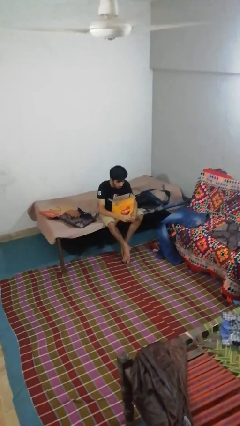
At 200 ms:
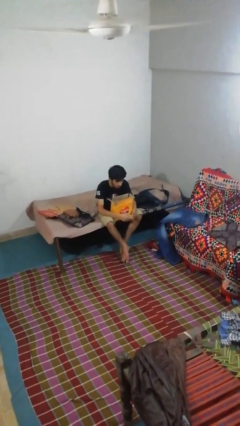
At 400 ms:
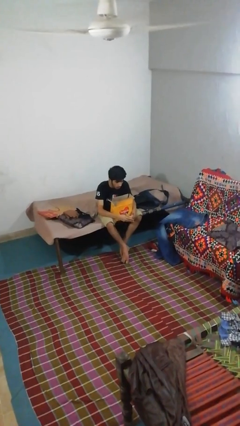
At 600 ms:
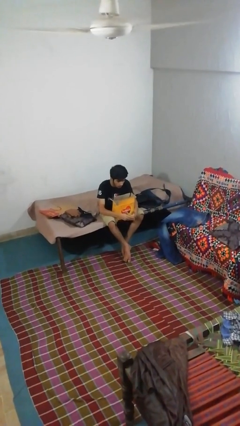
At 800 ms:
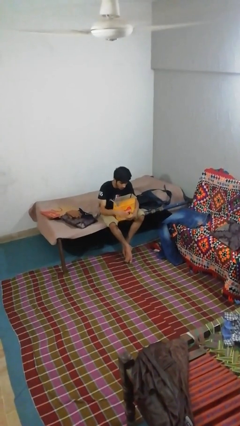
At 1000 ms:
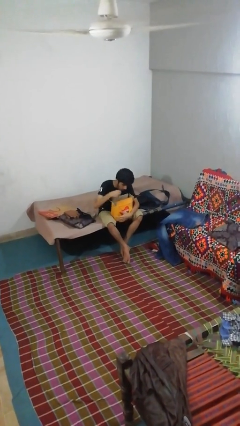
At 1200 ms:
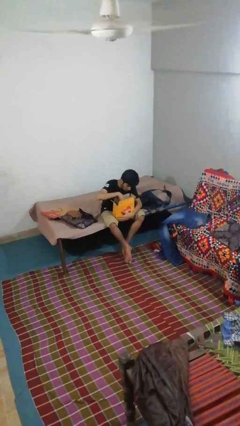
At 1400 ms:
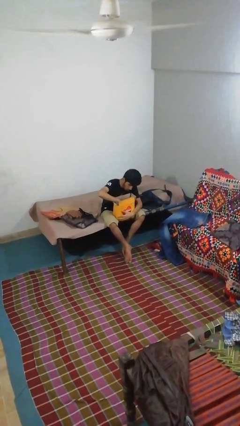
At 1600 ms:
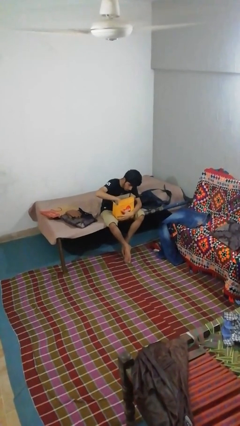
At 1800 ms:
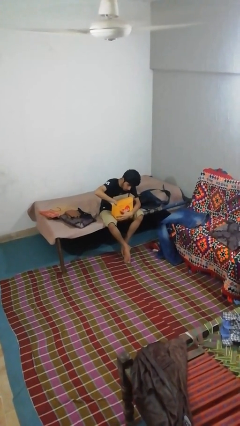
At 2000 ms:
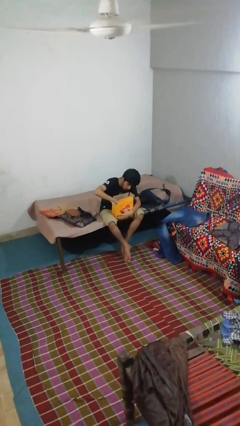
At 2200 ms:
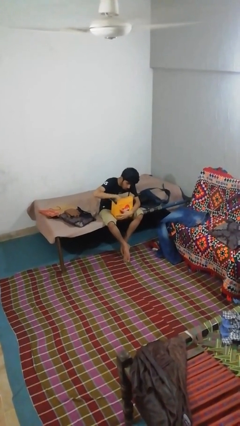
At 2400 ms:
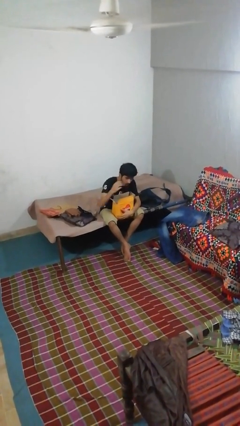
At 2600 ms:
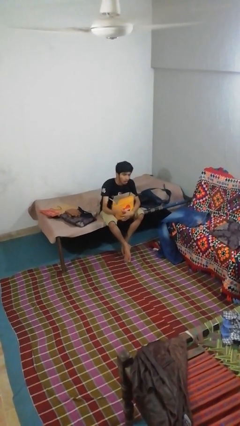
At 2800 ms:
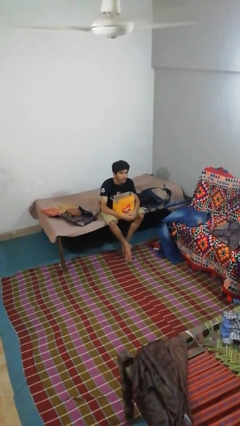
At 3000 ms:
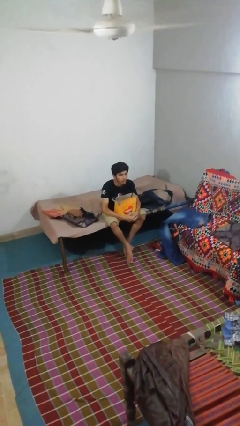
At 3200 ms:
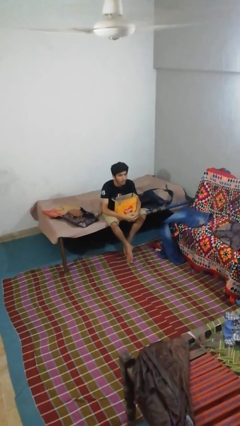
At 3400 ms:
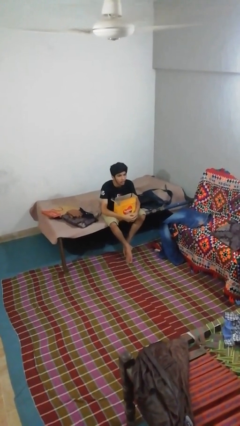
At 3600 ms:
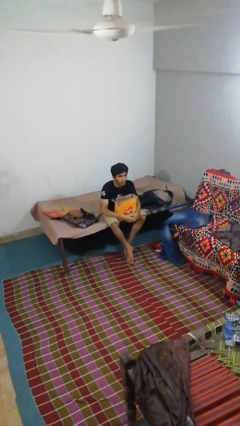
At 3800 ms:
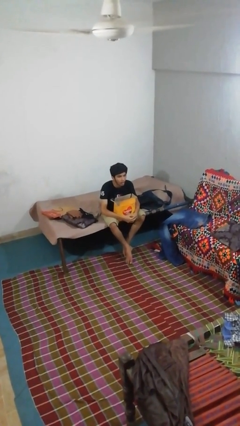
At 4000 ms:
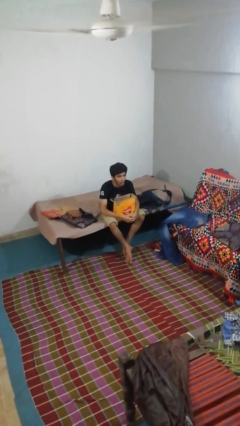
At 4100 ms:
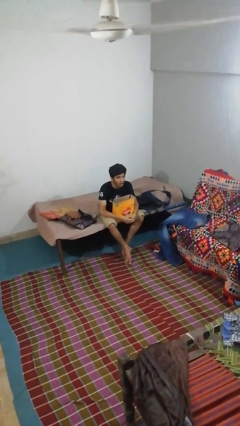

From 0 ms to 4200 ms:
person searches in box

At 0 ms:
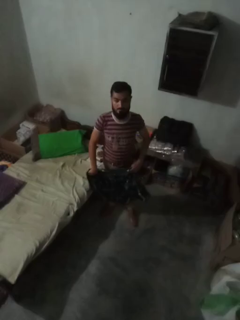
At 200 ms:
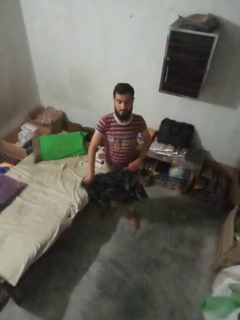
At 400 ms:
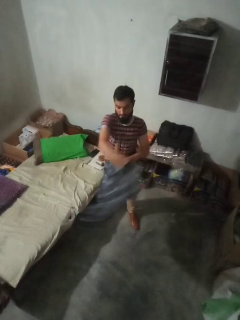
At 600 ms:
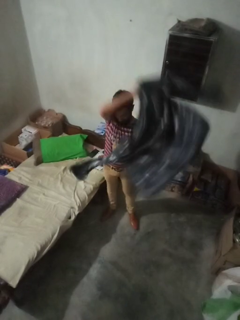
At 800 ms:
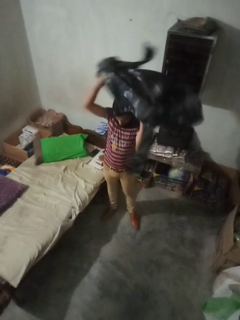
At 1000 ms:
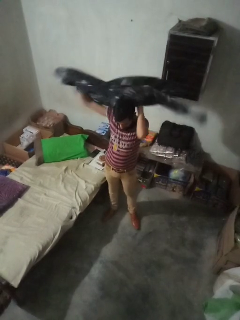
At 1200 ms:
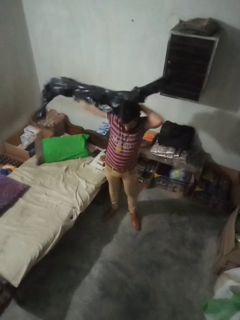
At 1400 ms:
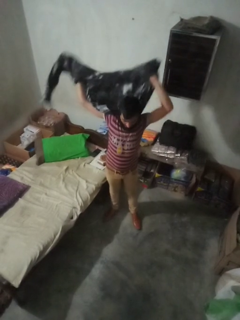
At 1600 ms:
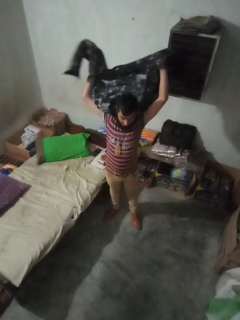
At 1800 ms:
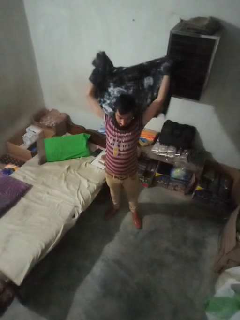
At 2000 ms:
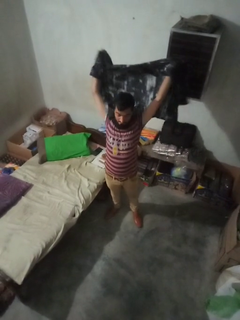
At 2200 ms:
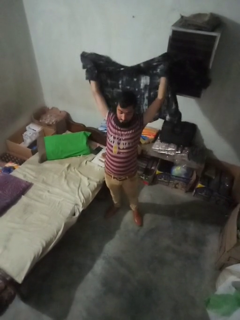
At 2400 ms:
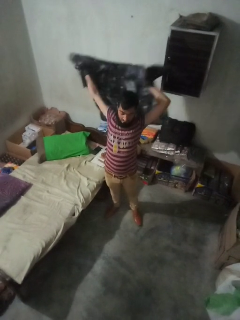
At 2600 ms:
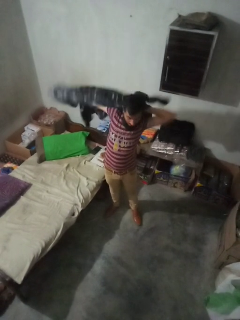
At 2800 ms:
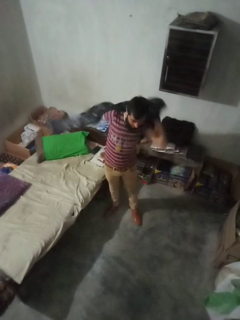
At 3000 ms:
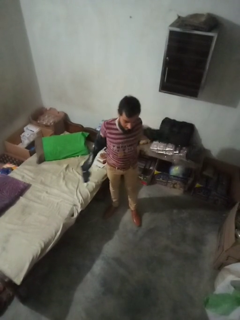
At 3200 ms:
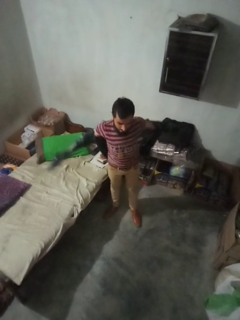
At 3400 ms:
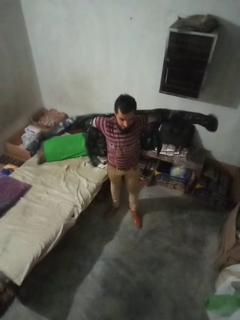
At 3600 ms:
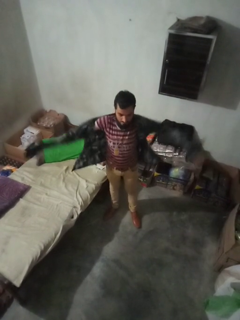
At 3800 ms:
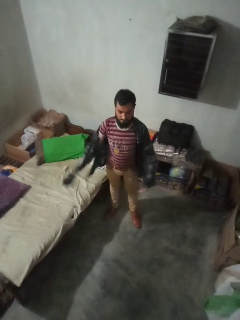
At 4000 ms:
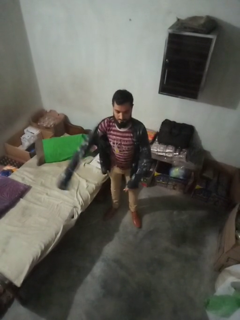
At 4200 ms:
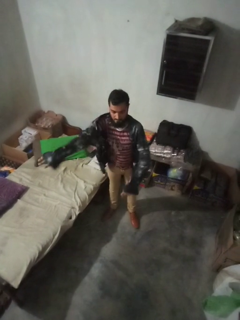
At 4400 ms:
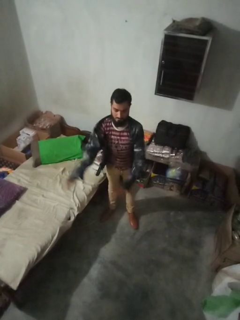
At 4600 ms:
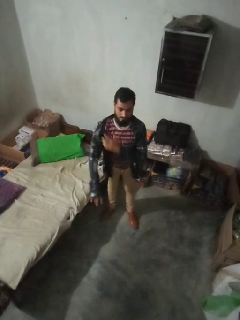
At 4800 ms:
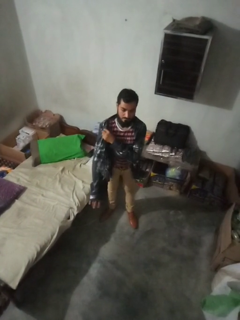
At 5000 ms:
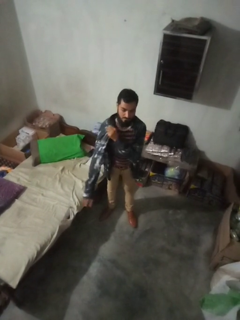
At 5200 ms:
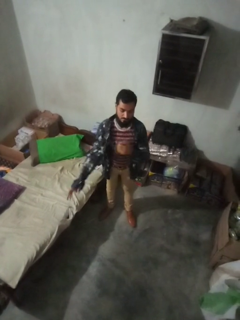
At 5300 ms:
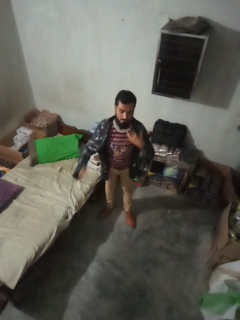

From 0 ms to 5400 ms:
person puts on shirt

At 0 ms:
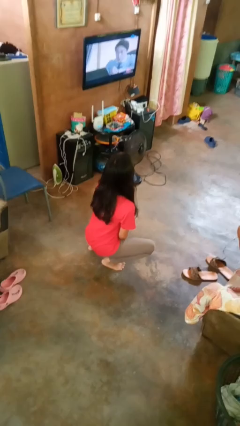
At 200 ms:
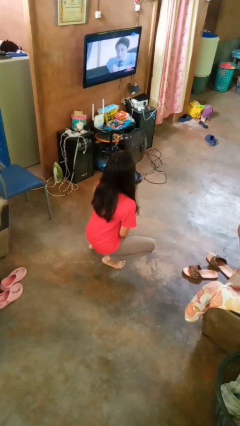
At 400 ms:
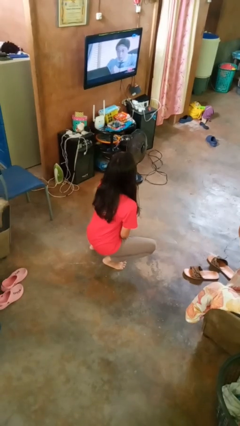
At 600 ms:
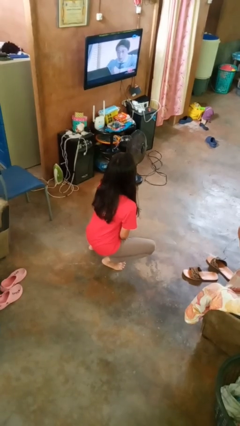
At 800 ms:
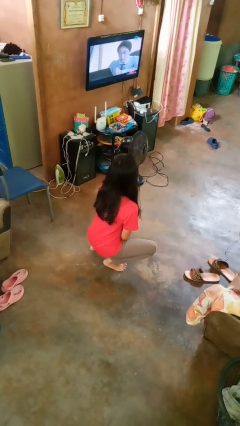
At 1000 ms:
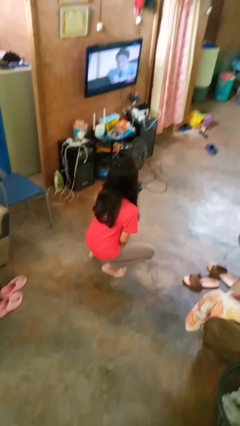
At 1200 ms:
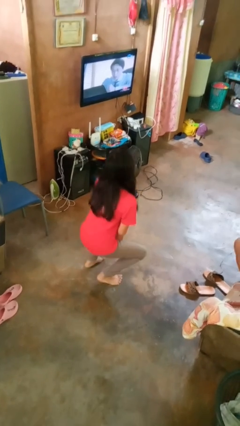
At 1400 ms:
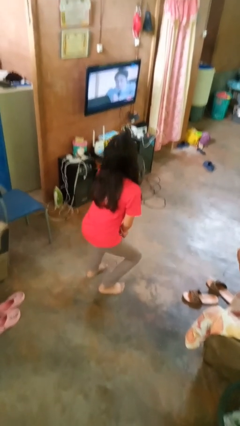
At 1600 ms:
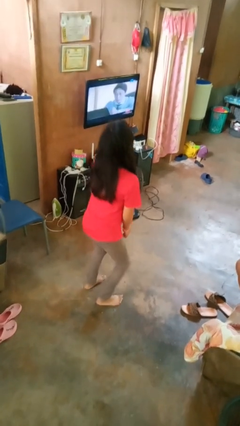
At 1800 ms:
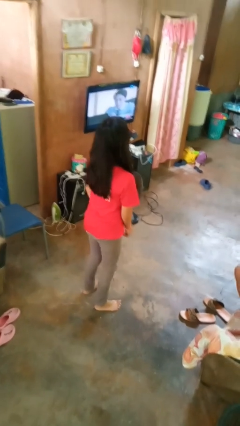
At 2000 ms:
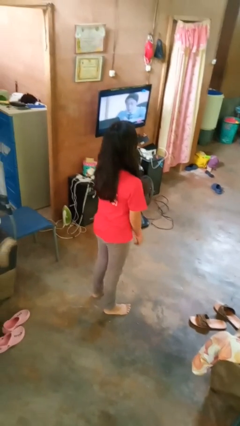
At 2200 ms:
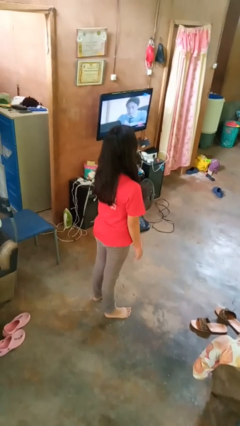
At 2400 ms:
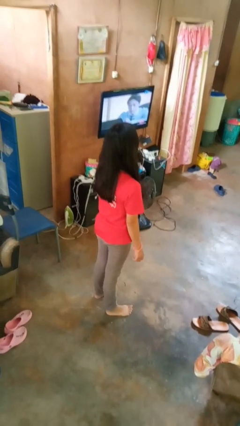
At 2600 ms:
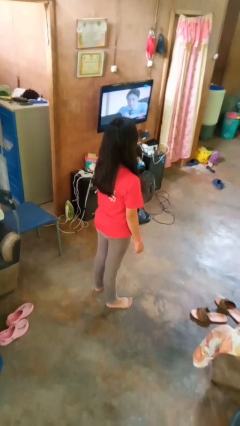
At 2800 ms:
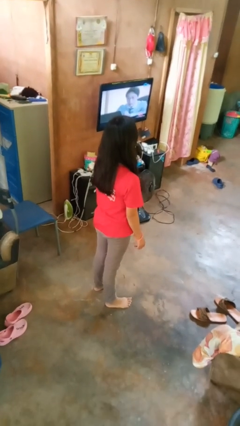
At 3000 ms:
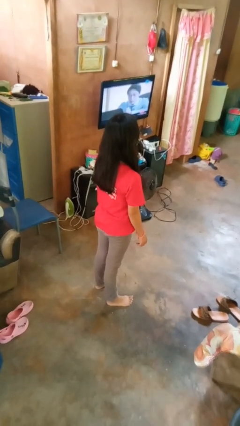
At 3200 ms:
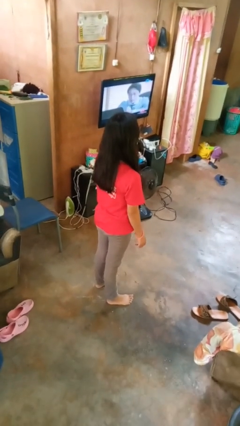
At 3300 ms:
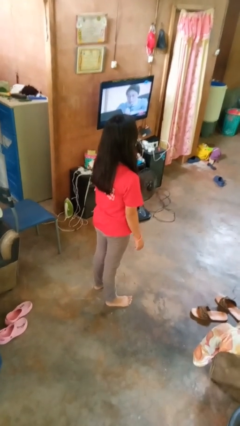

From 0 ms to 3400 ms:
person stands up

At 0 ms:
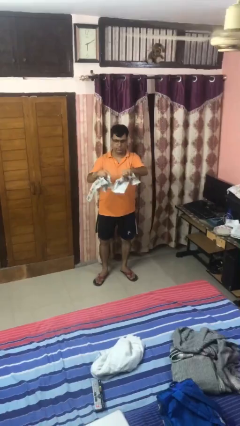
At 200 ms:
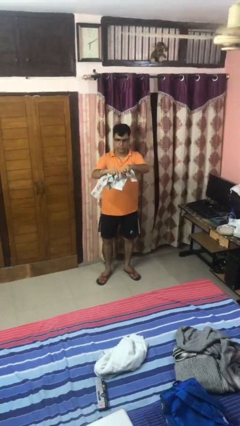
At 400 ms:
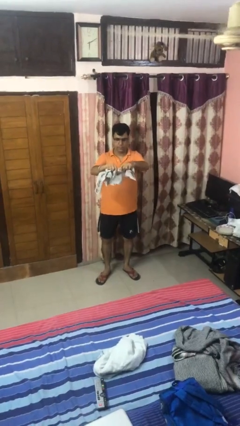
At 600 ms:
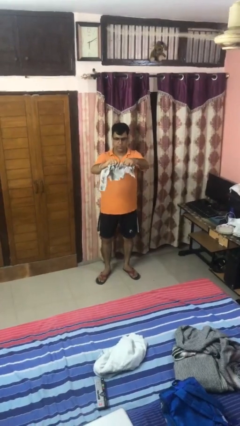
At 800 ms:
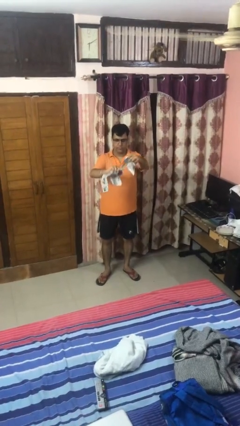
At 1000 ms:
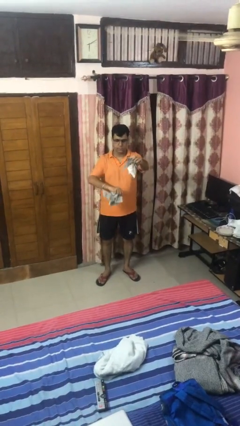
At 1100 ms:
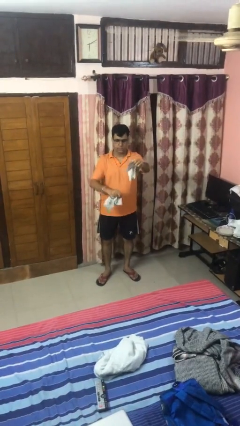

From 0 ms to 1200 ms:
person tears paper

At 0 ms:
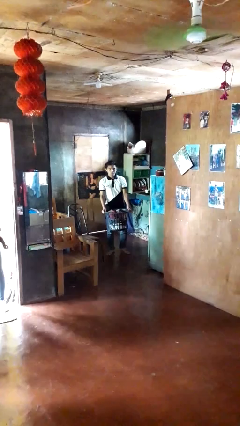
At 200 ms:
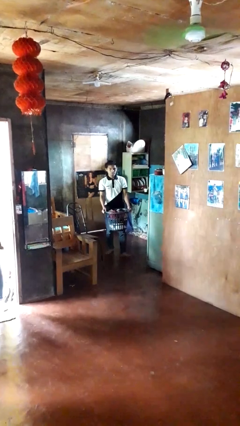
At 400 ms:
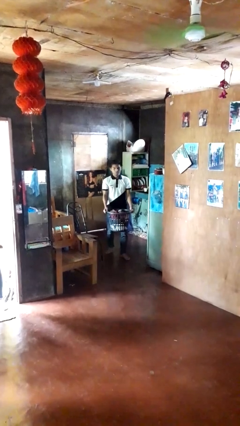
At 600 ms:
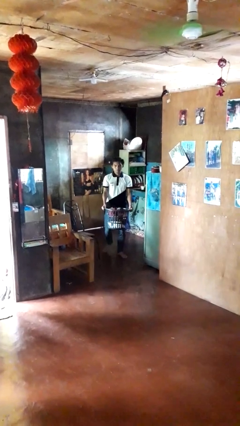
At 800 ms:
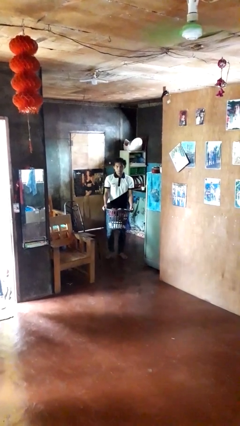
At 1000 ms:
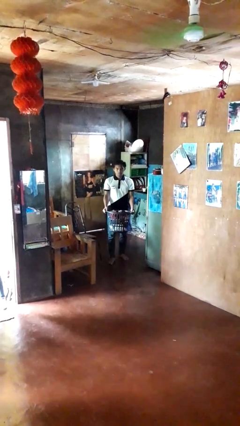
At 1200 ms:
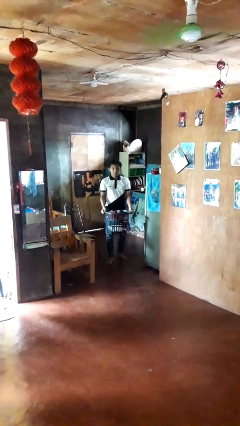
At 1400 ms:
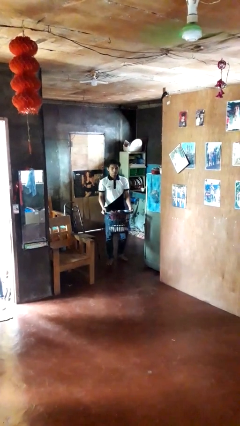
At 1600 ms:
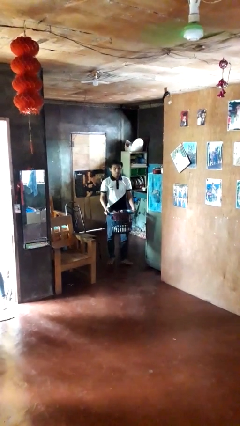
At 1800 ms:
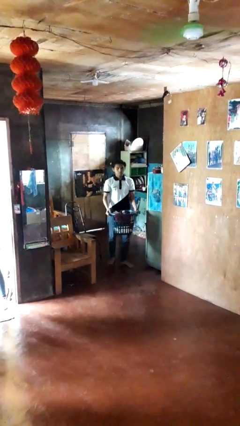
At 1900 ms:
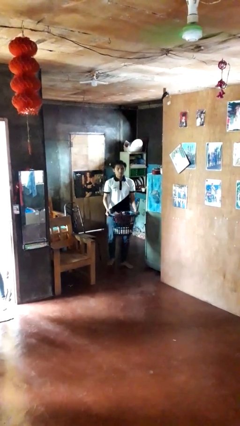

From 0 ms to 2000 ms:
person carries laundry basket

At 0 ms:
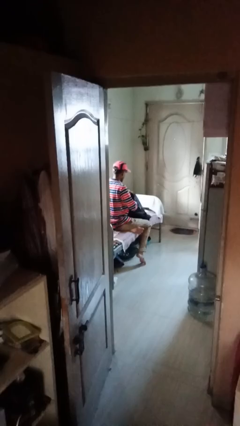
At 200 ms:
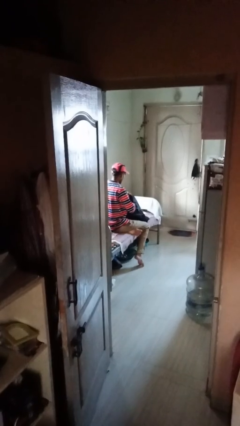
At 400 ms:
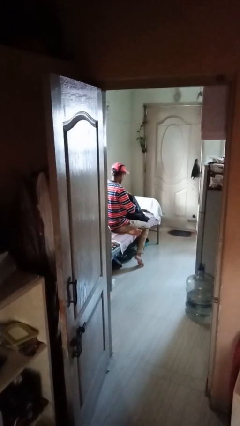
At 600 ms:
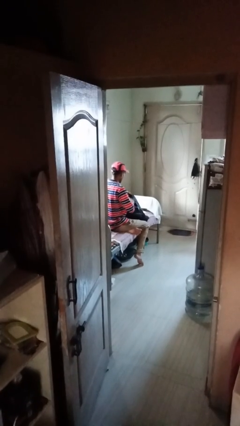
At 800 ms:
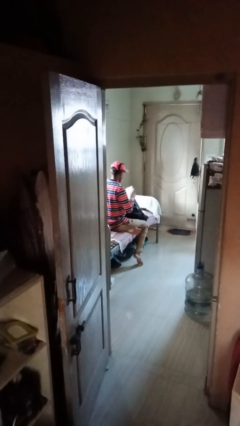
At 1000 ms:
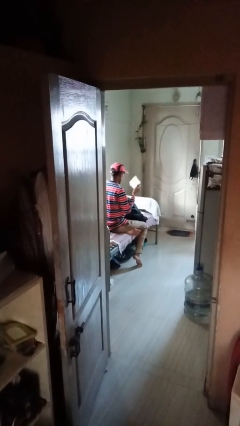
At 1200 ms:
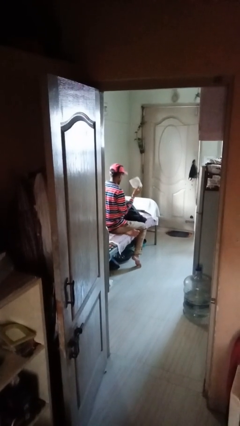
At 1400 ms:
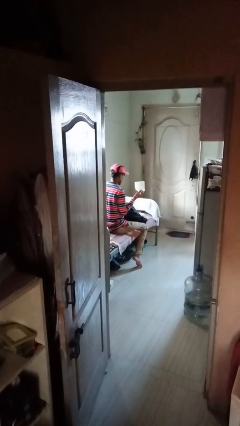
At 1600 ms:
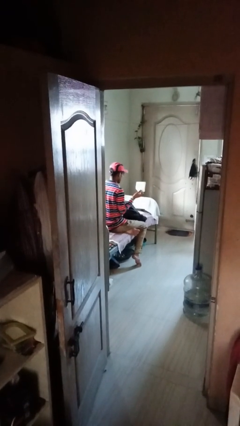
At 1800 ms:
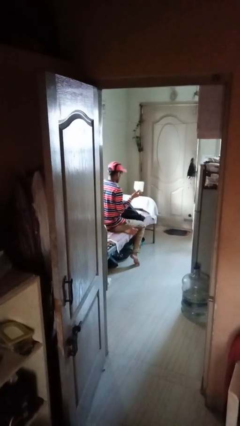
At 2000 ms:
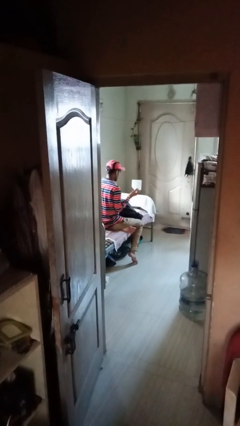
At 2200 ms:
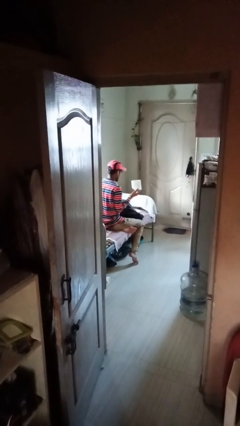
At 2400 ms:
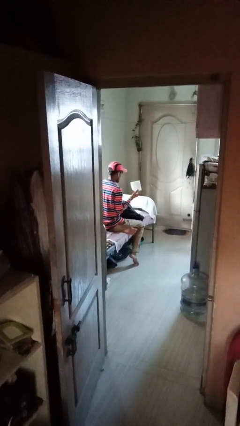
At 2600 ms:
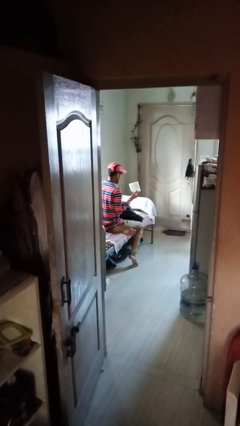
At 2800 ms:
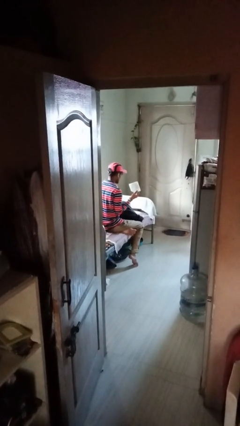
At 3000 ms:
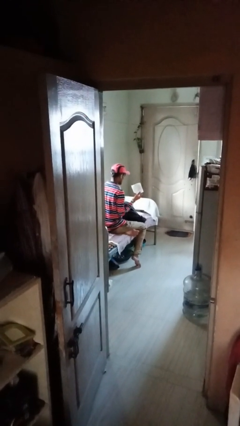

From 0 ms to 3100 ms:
person takes object from backpack
